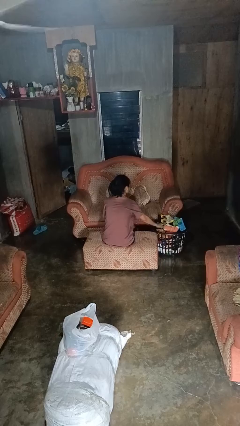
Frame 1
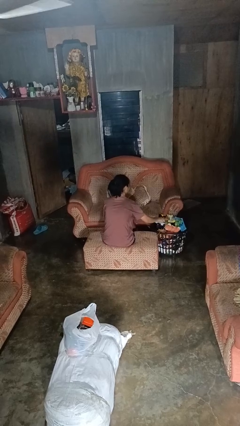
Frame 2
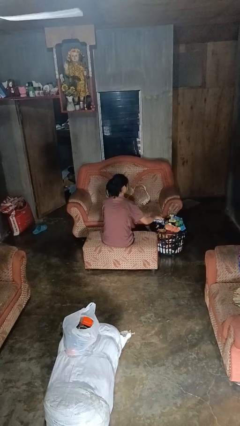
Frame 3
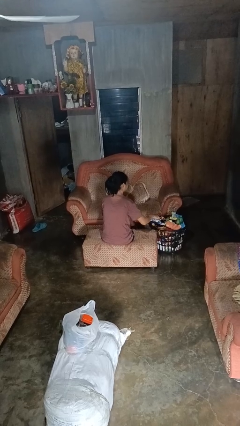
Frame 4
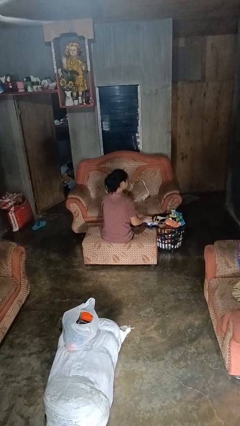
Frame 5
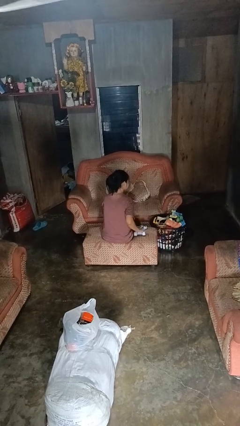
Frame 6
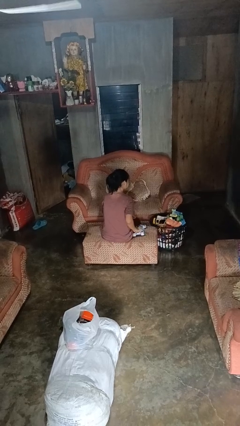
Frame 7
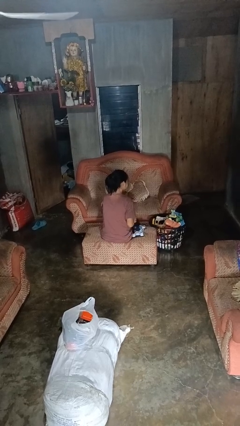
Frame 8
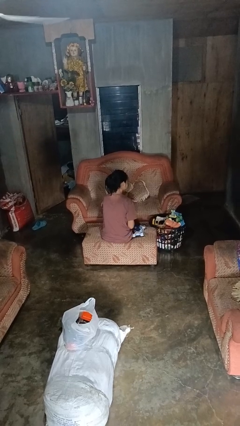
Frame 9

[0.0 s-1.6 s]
person takes object from basket

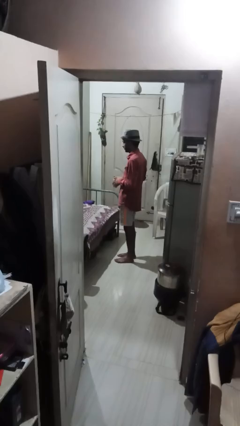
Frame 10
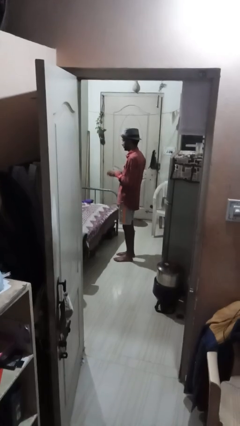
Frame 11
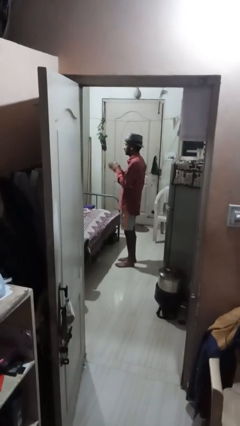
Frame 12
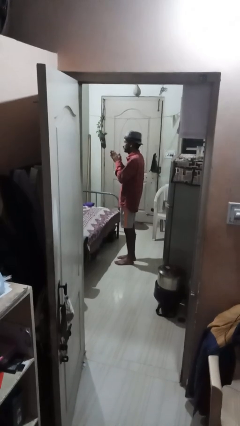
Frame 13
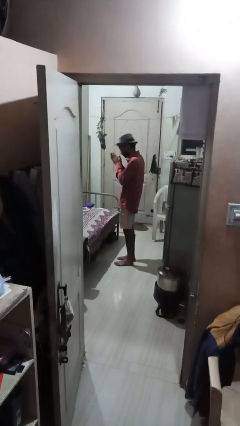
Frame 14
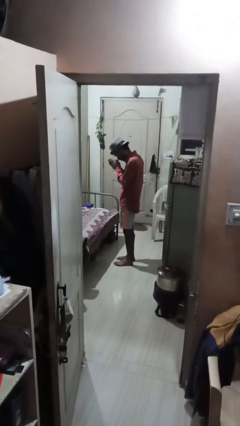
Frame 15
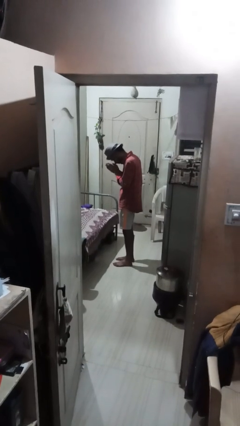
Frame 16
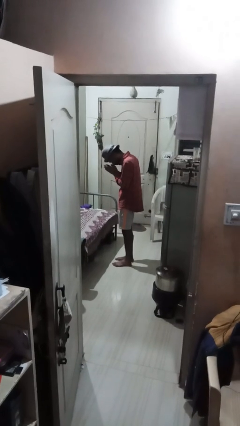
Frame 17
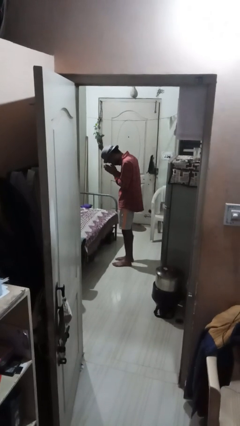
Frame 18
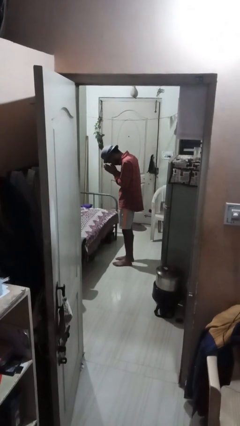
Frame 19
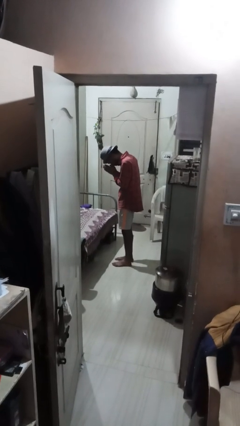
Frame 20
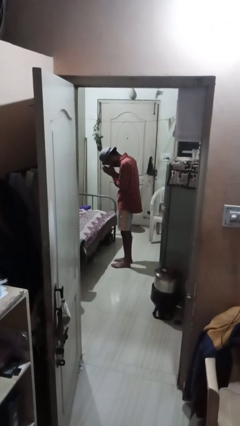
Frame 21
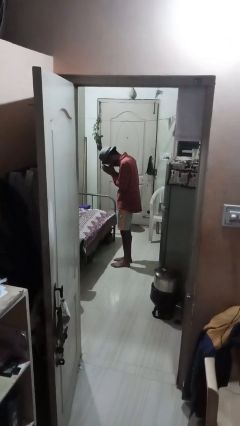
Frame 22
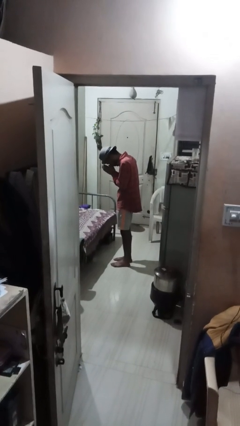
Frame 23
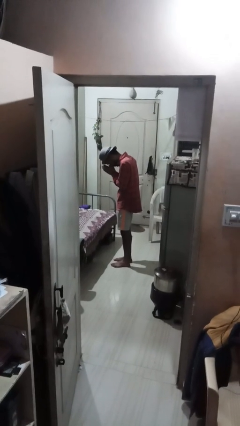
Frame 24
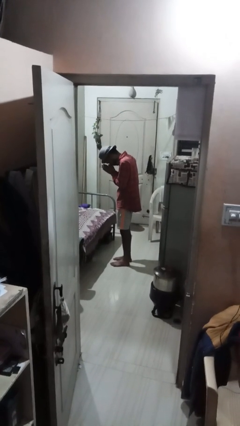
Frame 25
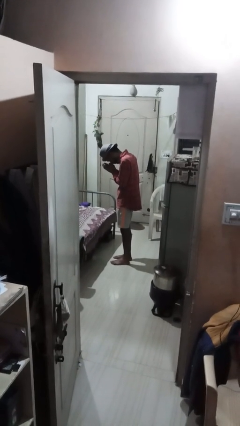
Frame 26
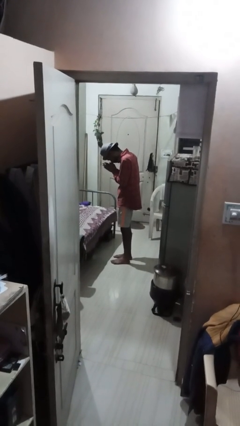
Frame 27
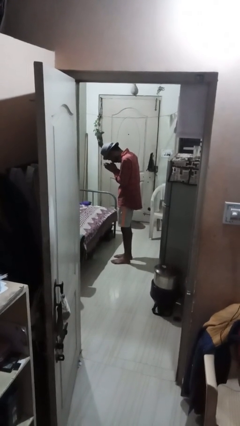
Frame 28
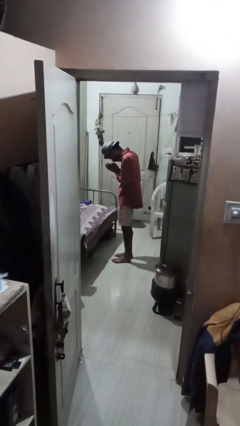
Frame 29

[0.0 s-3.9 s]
person prays

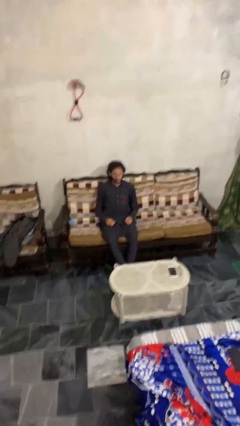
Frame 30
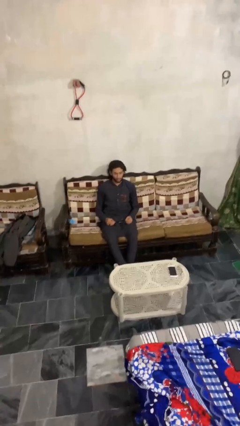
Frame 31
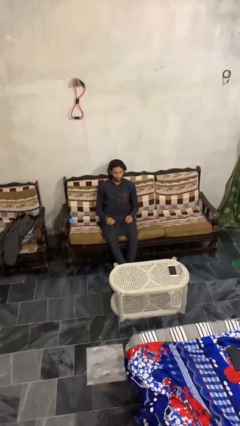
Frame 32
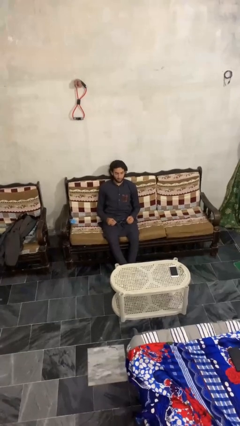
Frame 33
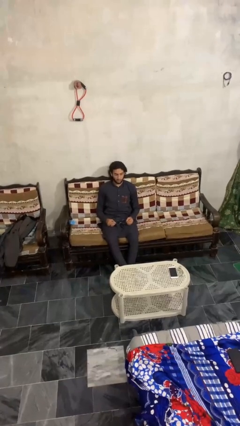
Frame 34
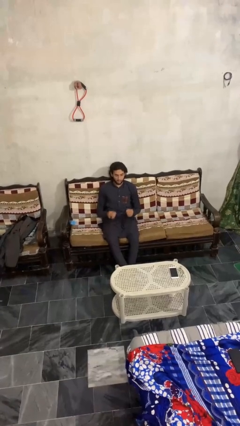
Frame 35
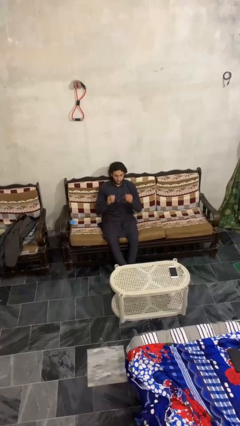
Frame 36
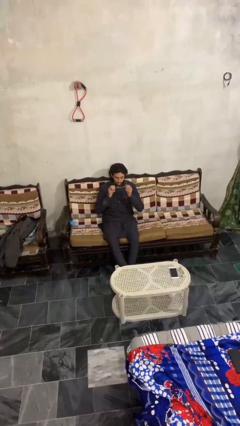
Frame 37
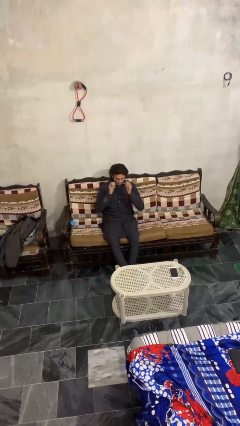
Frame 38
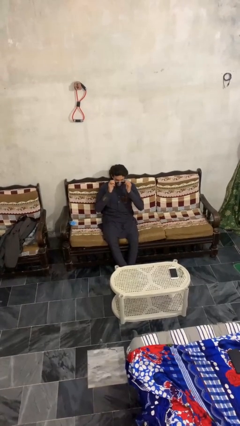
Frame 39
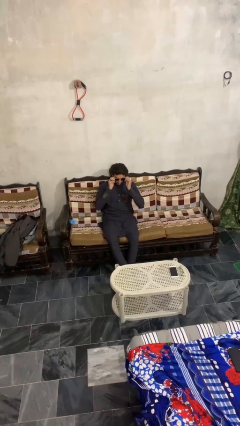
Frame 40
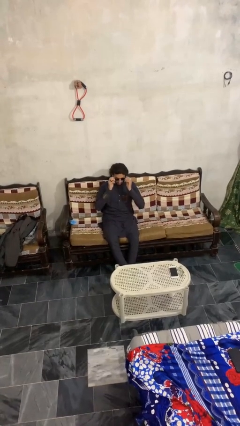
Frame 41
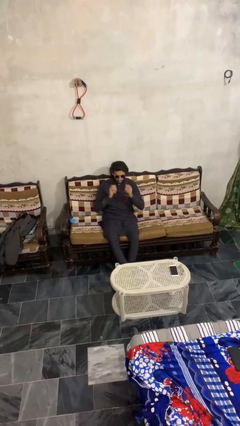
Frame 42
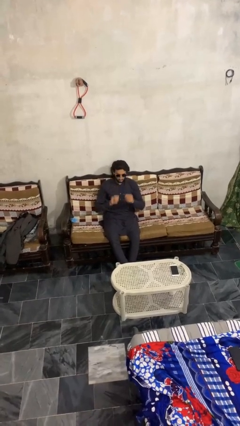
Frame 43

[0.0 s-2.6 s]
person puts on sunglasses

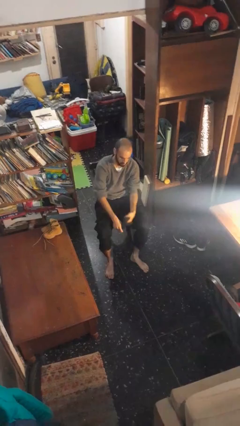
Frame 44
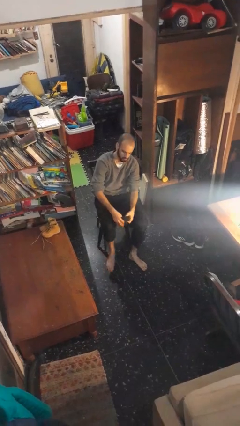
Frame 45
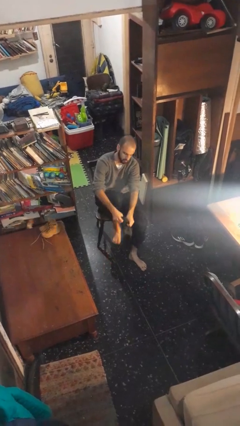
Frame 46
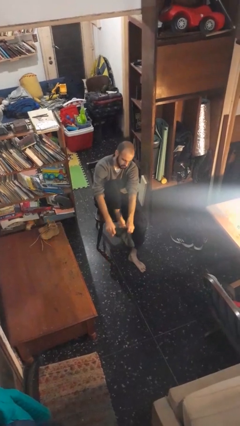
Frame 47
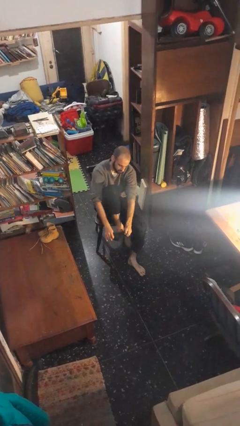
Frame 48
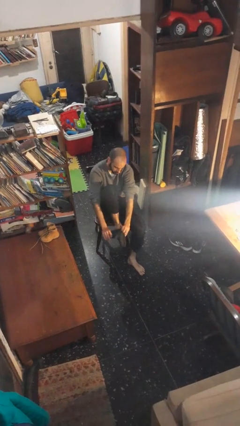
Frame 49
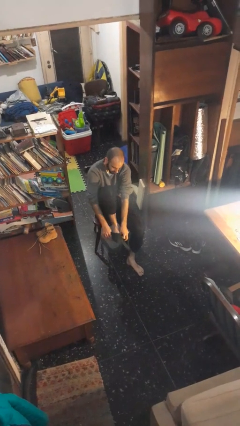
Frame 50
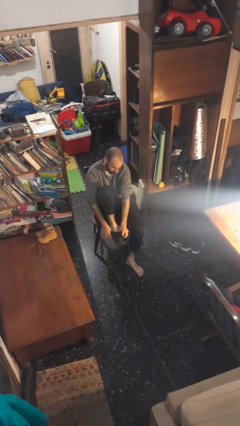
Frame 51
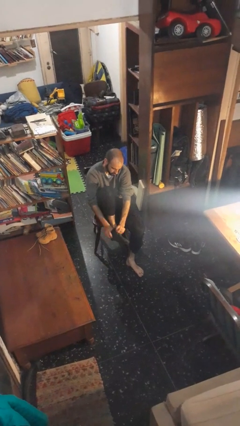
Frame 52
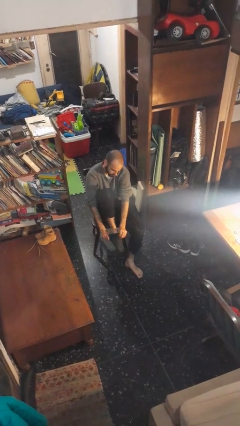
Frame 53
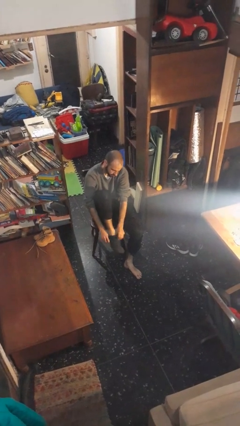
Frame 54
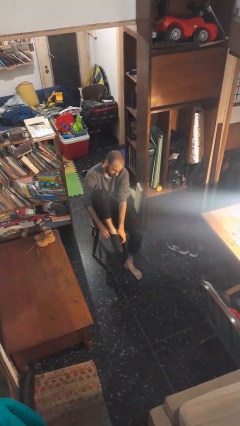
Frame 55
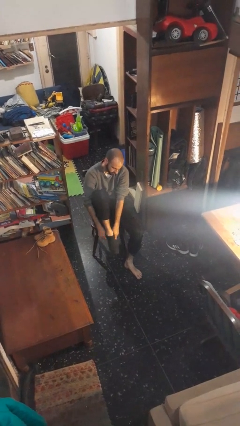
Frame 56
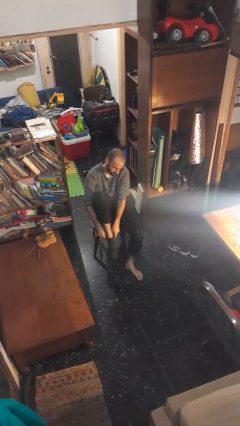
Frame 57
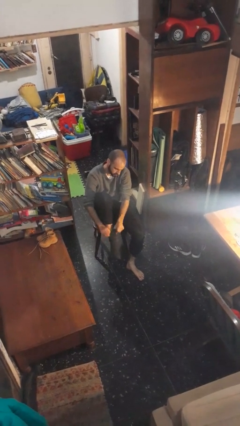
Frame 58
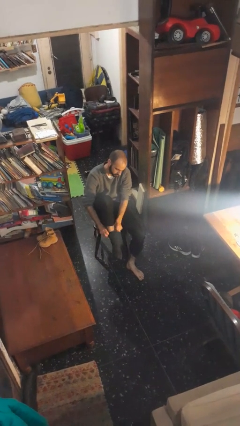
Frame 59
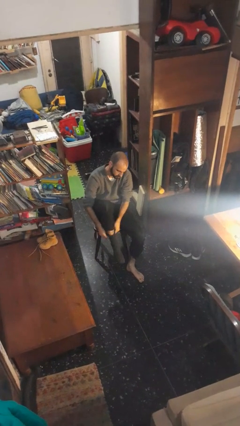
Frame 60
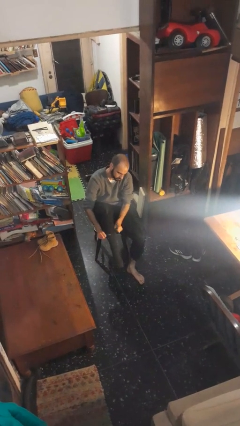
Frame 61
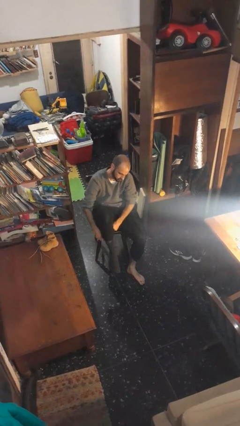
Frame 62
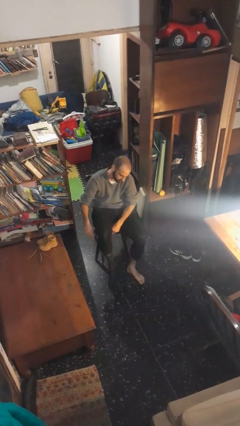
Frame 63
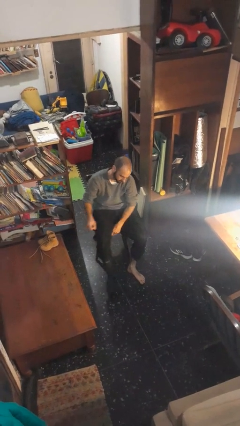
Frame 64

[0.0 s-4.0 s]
person puts on socks

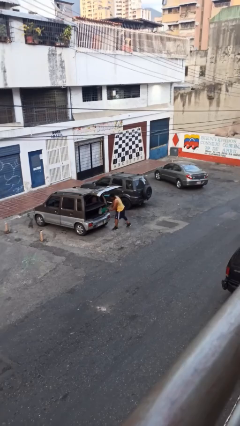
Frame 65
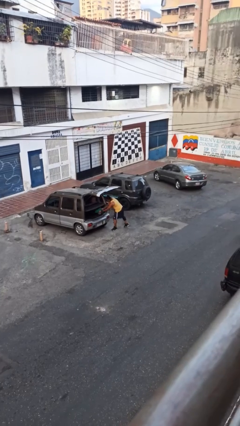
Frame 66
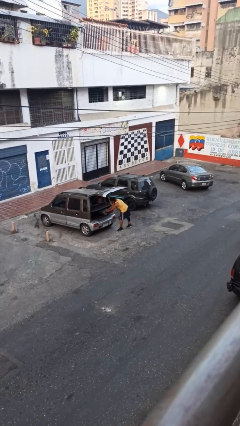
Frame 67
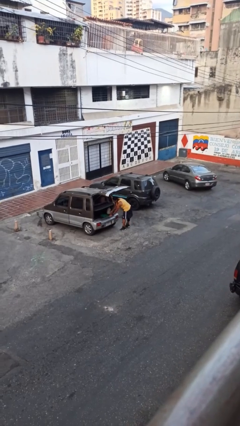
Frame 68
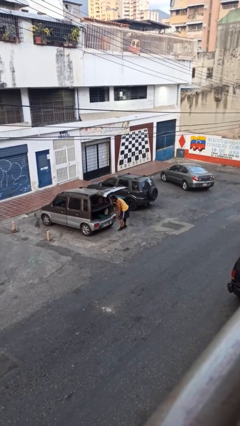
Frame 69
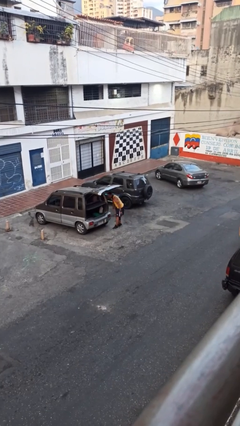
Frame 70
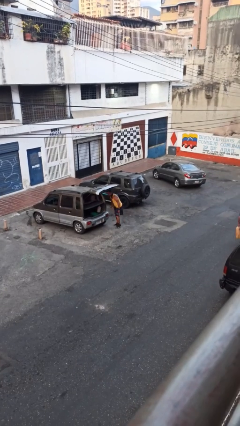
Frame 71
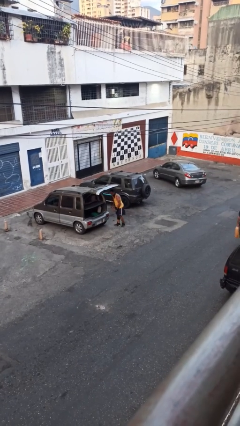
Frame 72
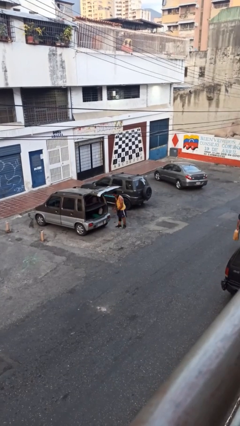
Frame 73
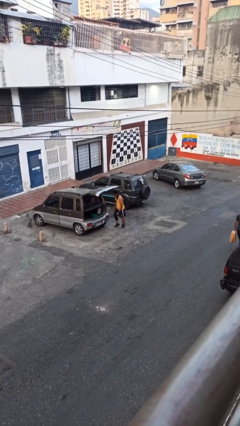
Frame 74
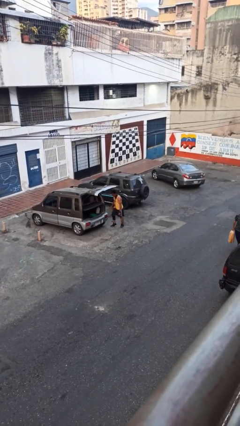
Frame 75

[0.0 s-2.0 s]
person loads car

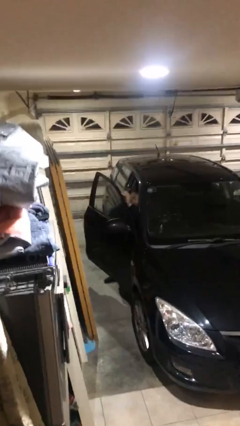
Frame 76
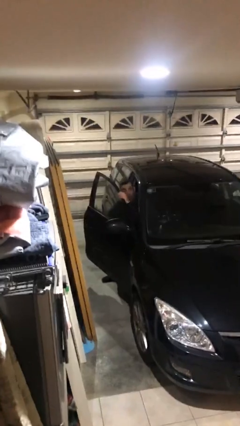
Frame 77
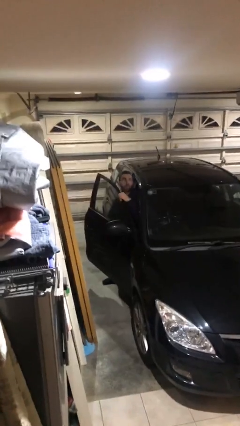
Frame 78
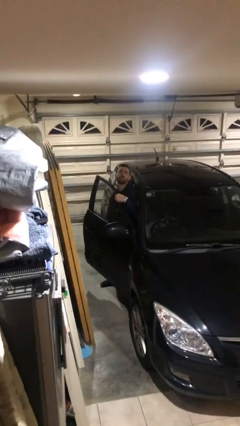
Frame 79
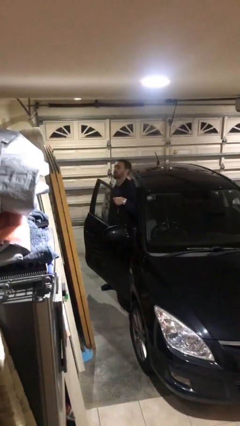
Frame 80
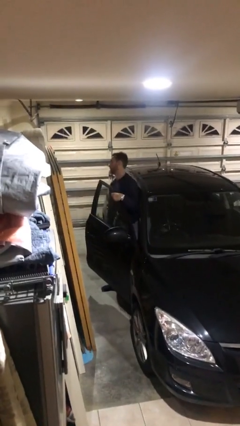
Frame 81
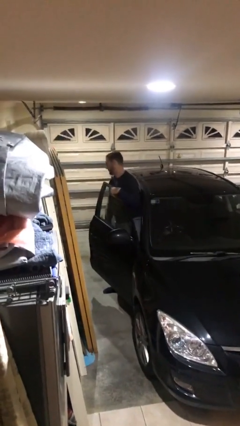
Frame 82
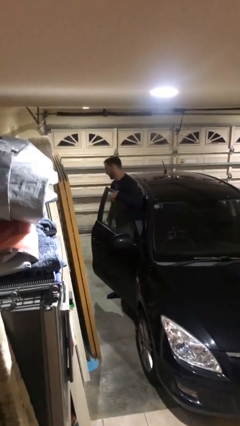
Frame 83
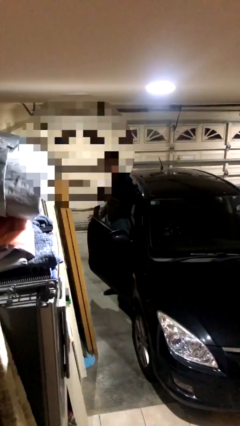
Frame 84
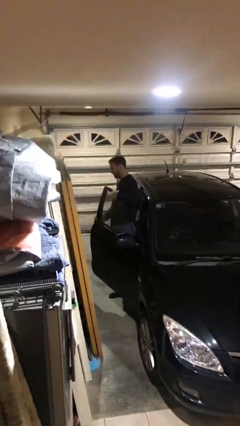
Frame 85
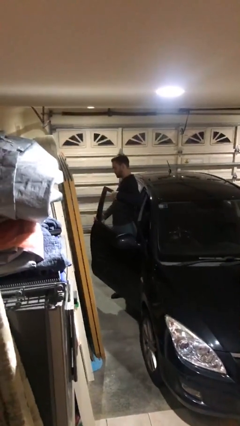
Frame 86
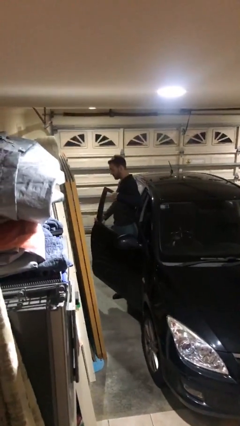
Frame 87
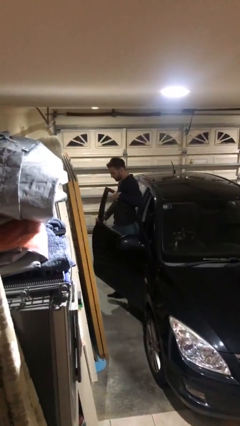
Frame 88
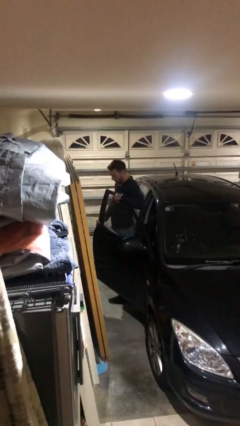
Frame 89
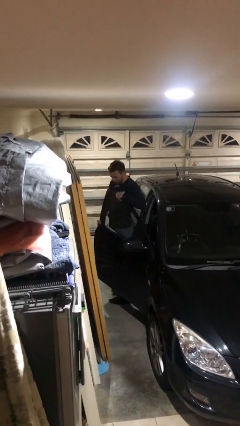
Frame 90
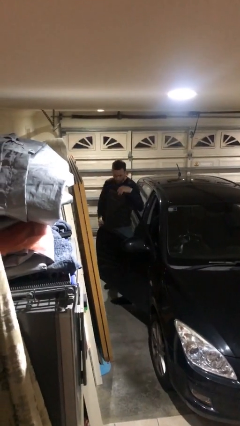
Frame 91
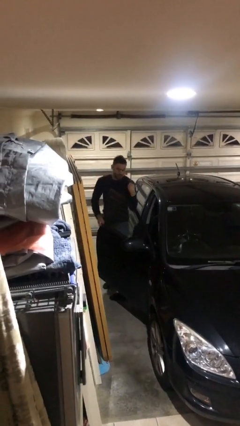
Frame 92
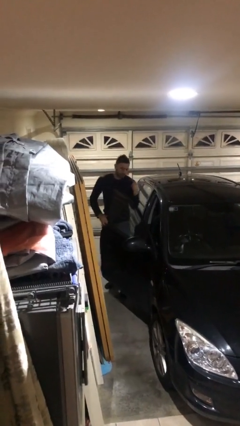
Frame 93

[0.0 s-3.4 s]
person exits car
